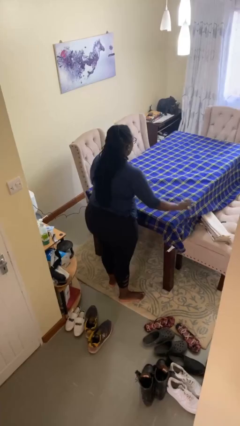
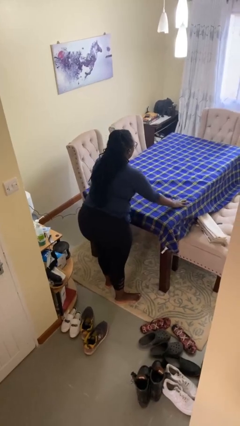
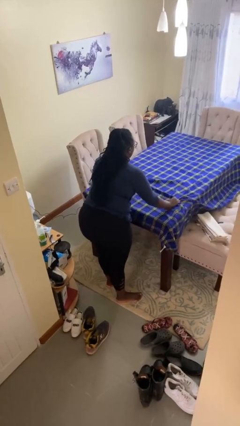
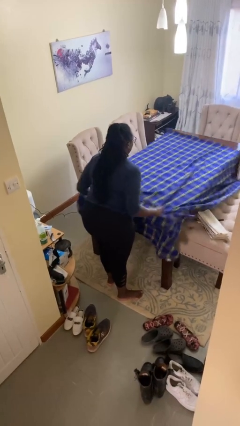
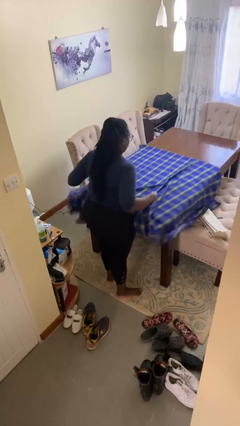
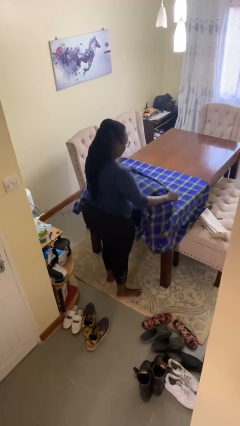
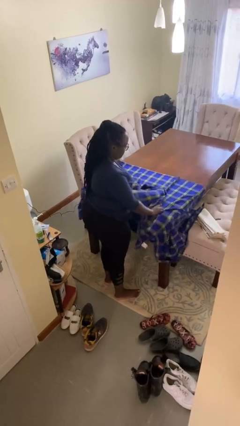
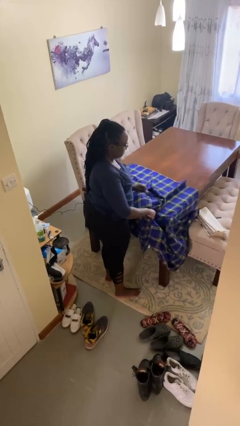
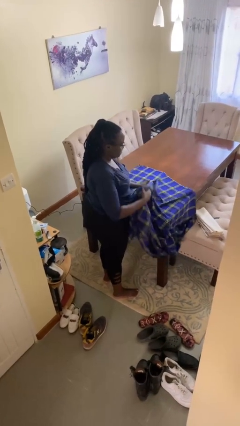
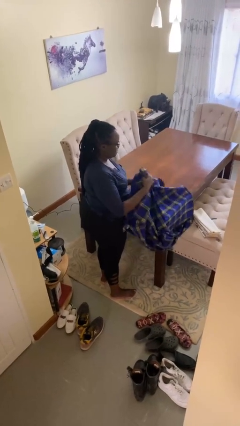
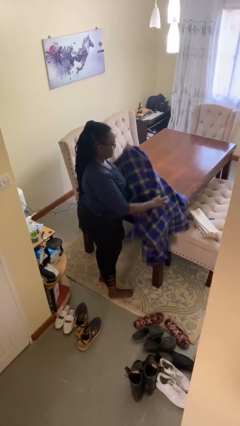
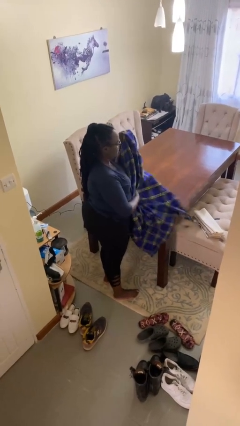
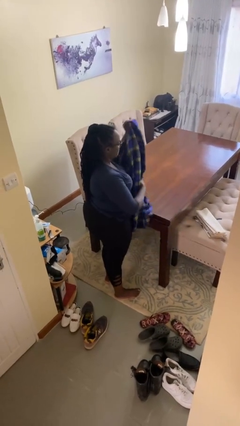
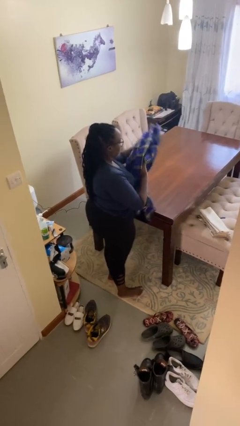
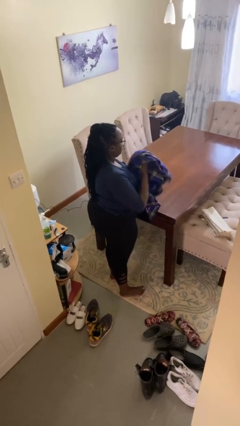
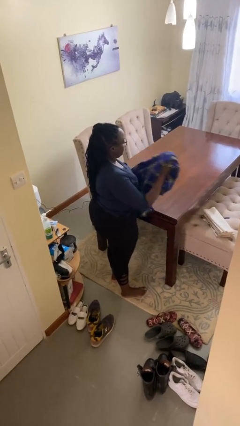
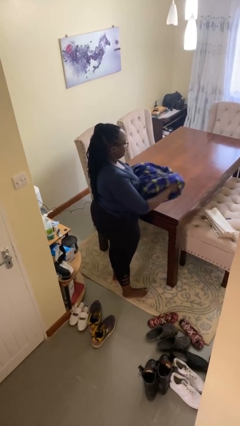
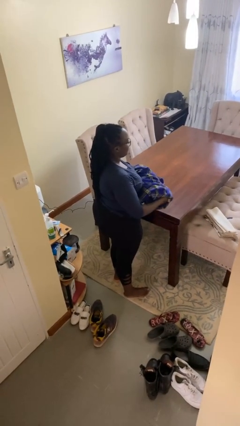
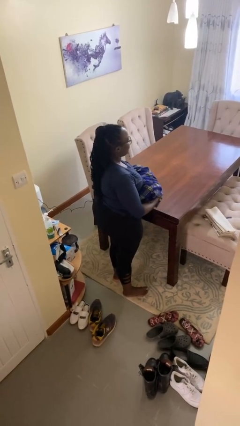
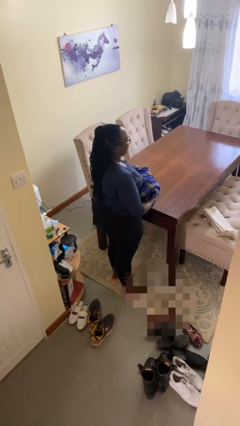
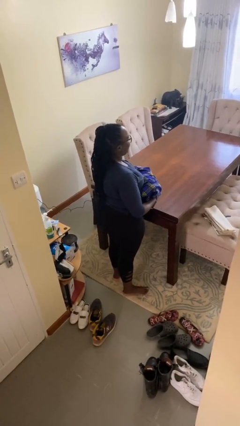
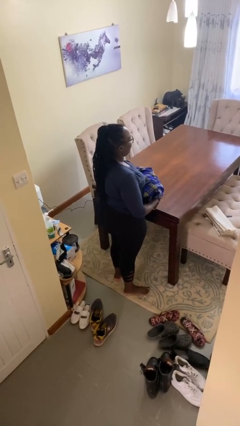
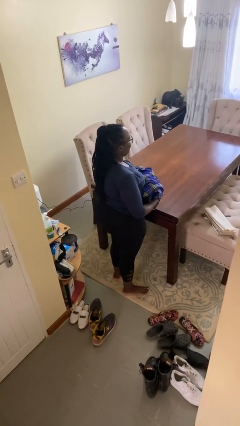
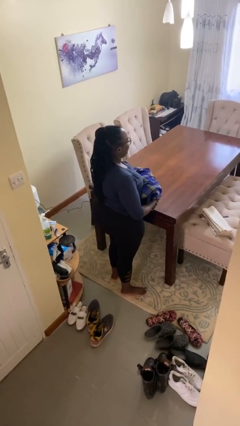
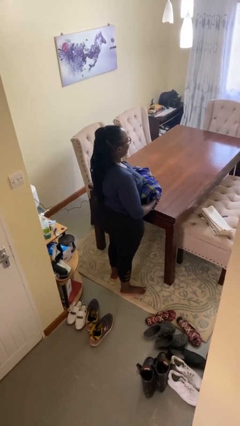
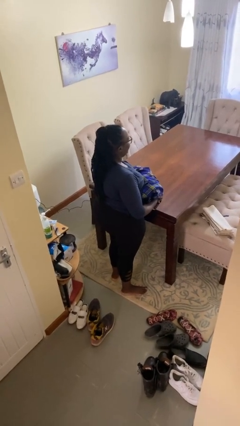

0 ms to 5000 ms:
person folds tablecloth

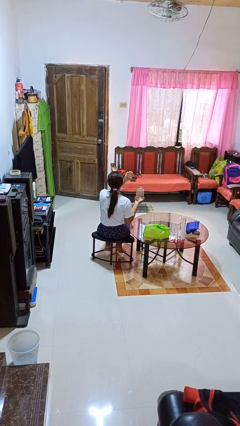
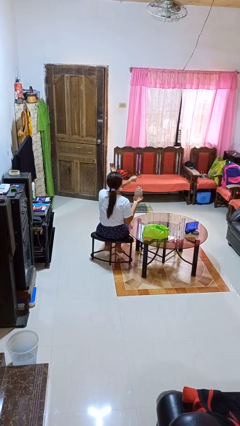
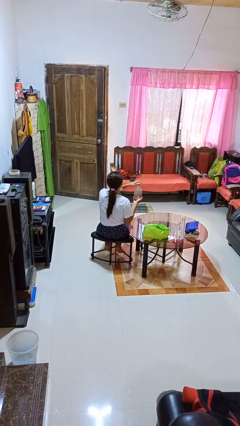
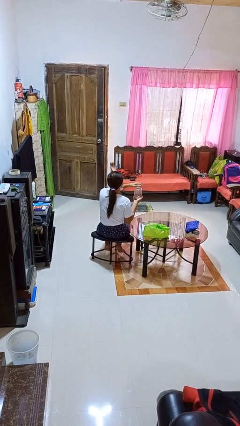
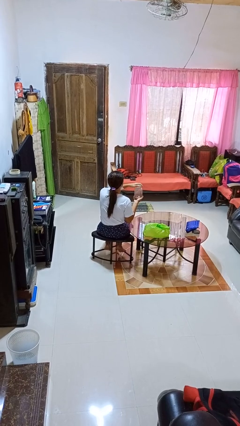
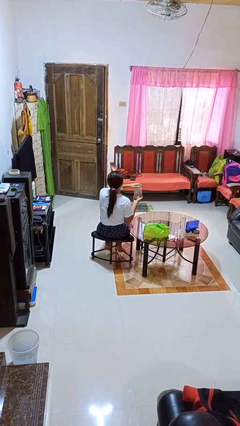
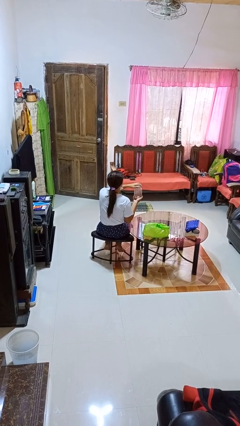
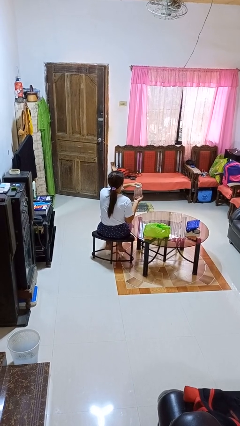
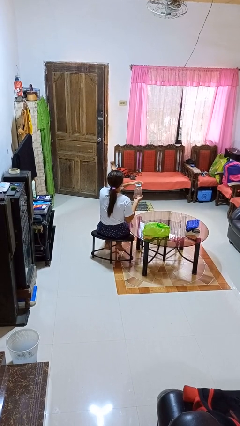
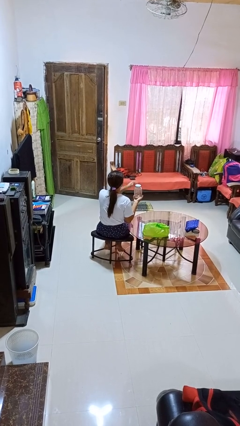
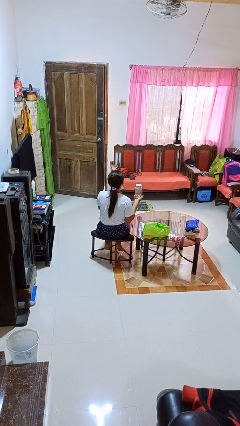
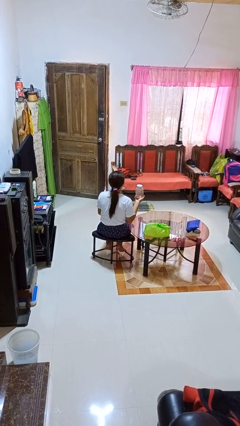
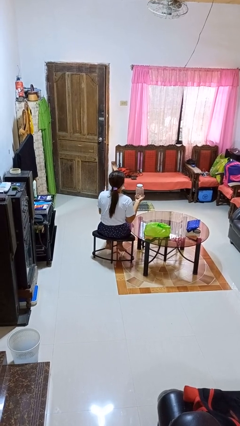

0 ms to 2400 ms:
person closes jar

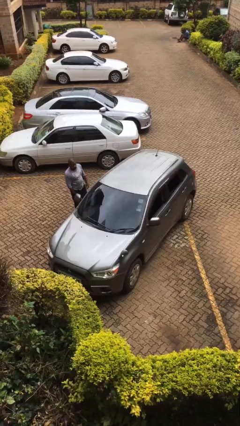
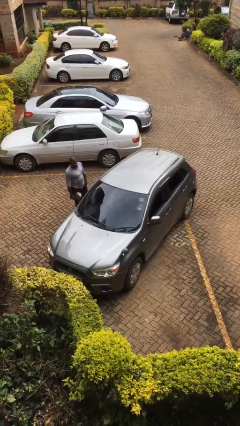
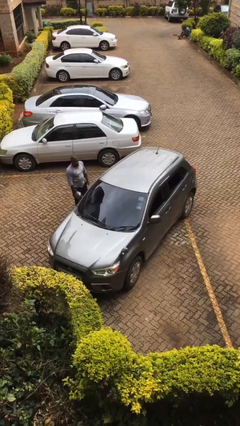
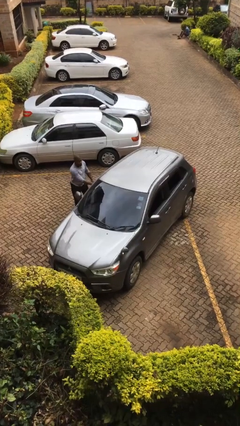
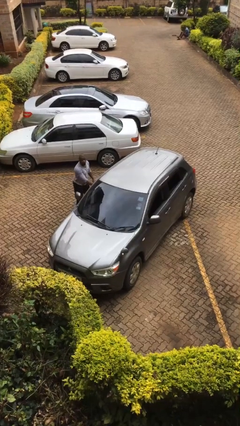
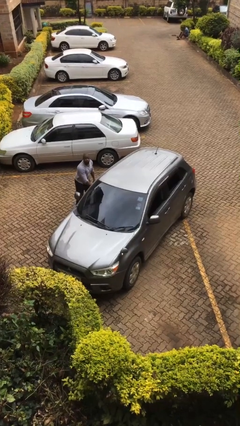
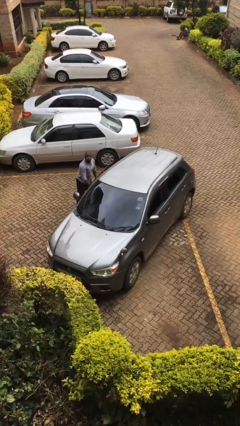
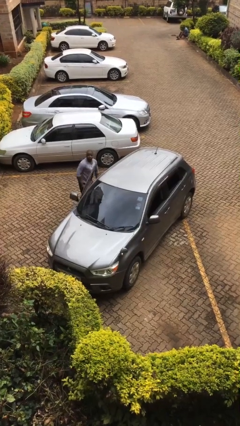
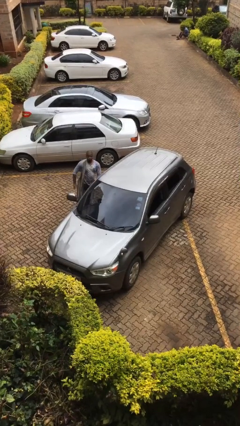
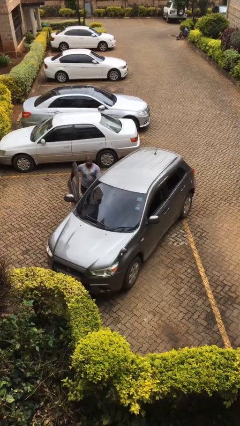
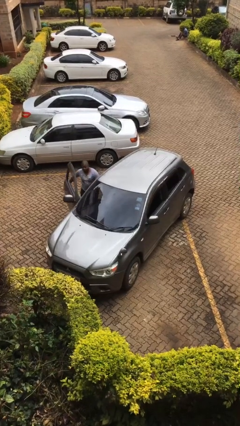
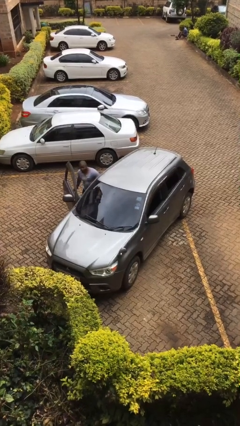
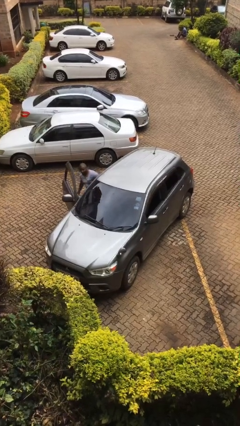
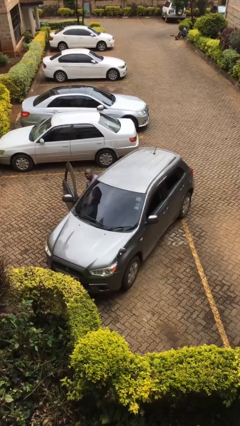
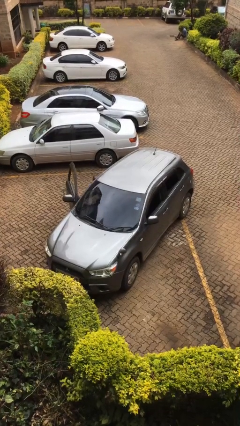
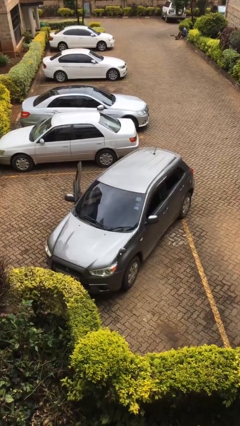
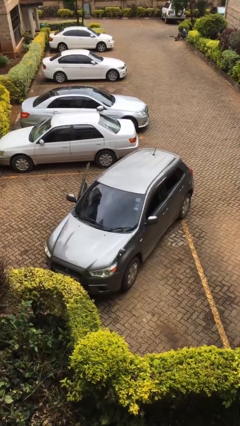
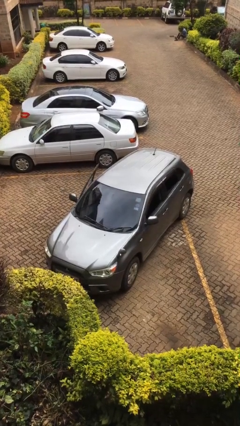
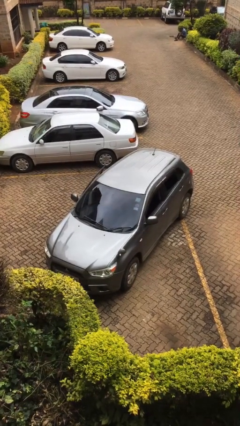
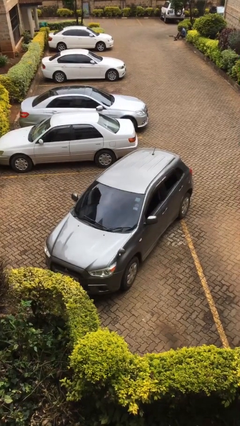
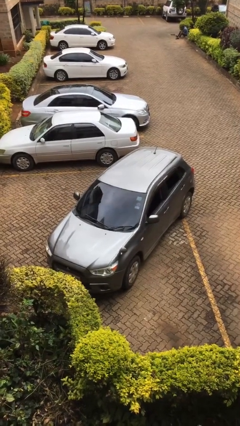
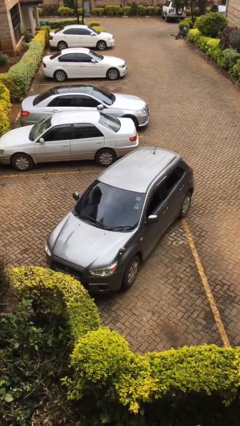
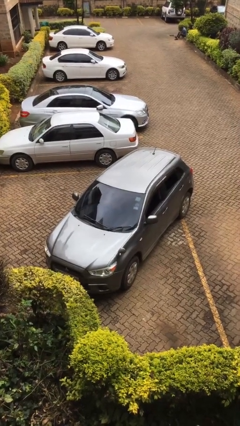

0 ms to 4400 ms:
car picks up person

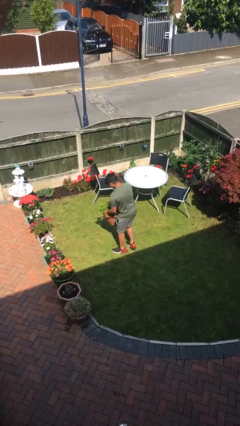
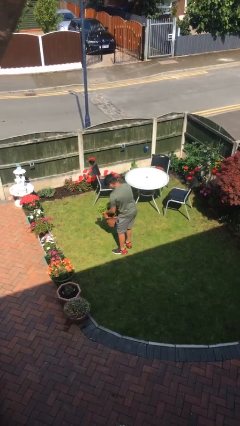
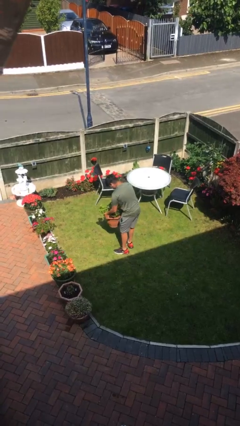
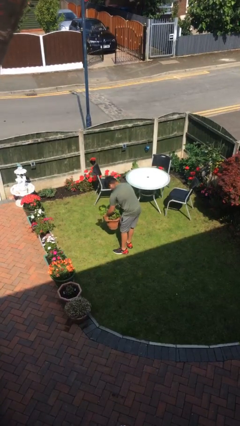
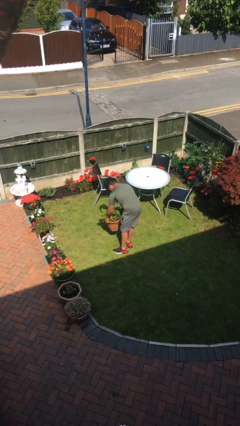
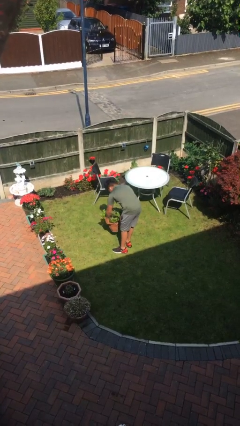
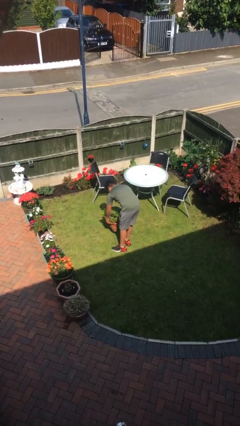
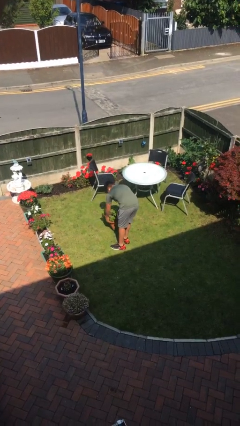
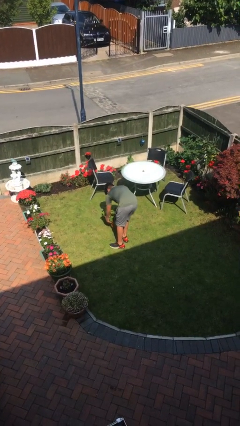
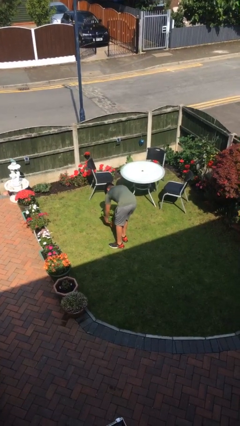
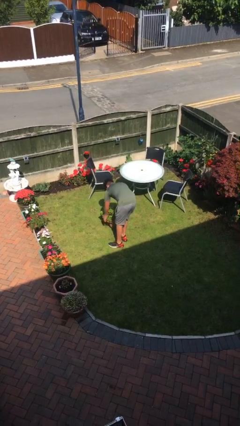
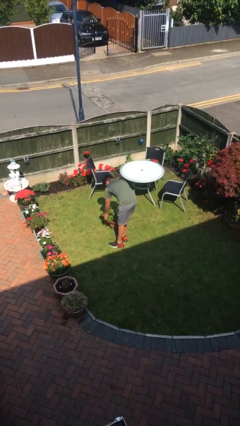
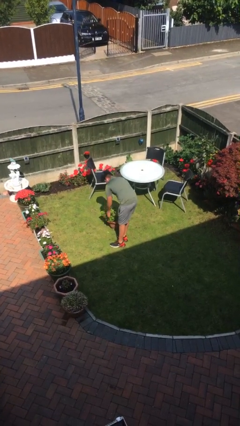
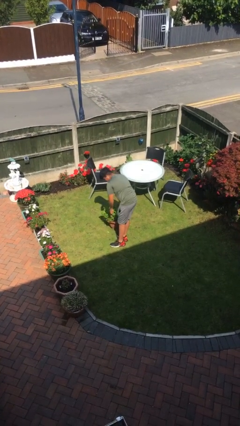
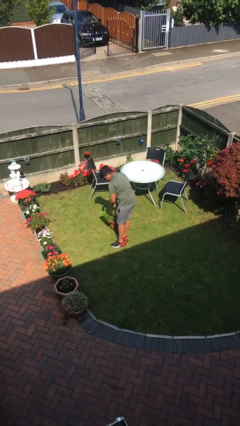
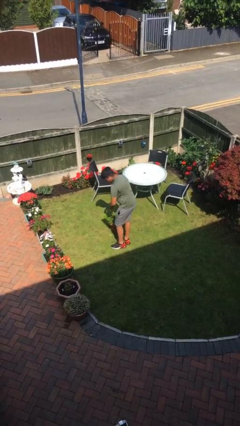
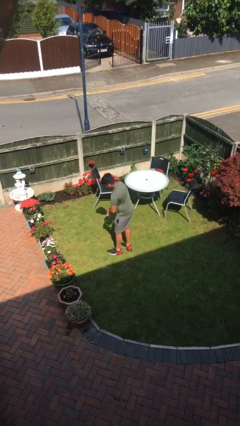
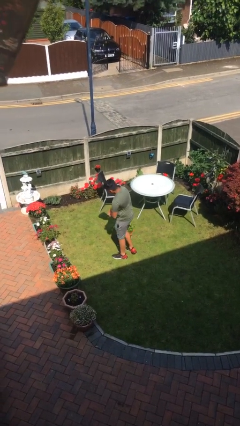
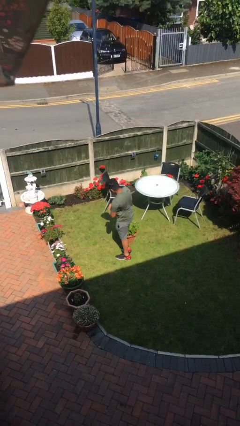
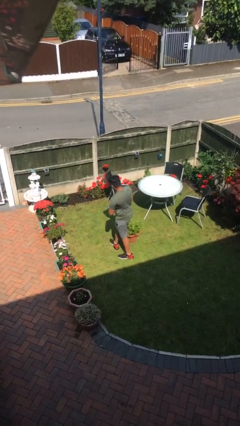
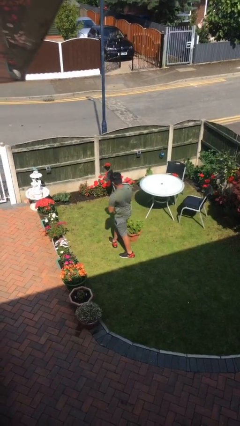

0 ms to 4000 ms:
person puts down object on floor

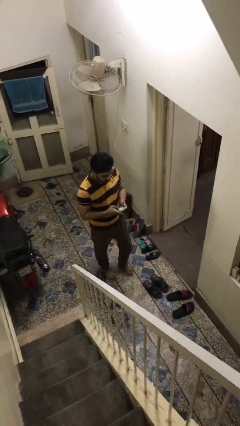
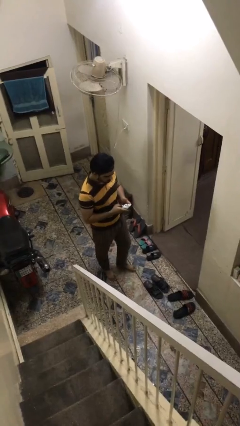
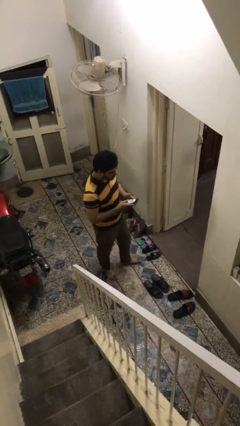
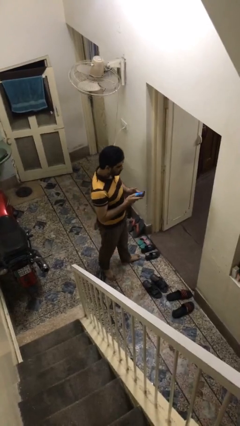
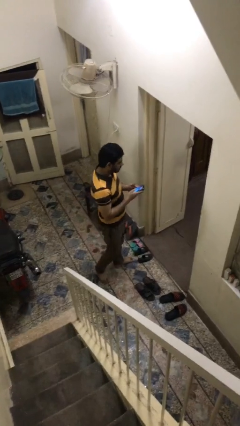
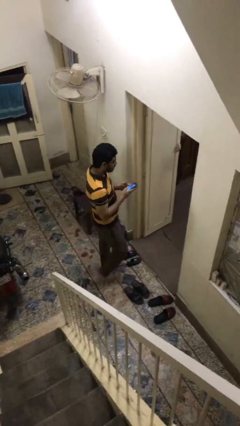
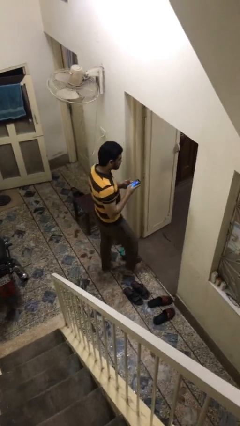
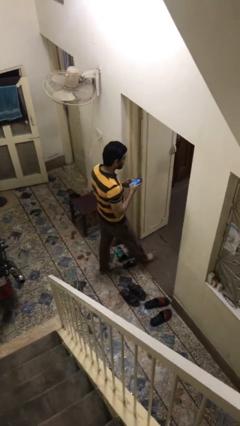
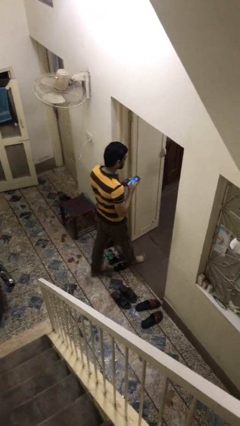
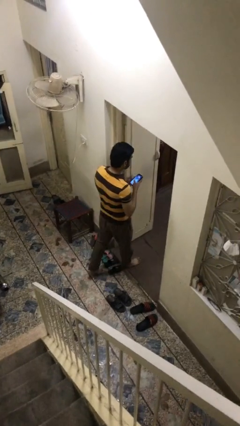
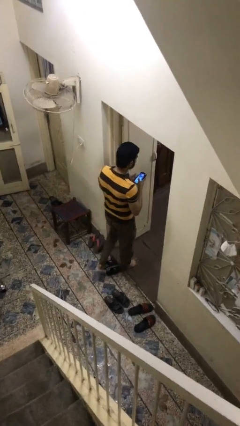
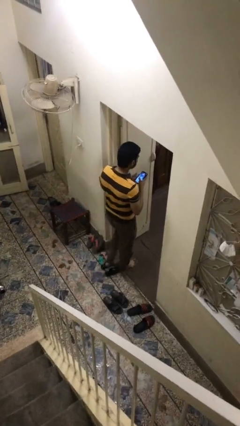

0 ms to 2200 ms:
person exits scene through structure
